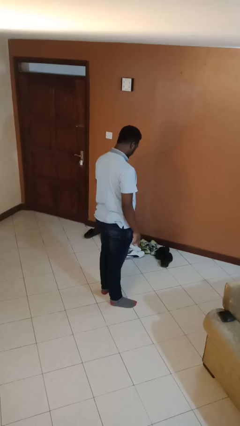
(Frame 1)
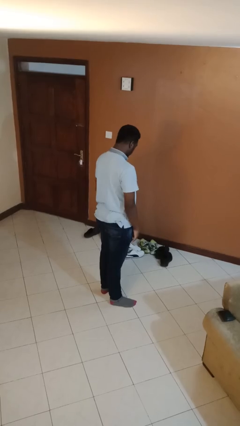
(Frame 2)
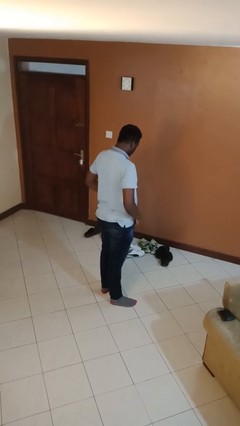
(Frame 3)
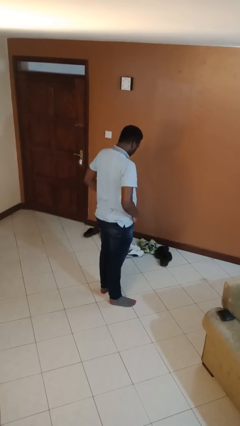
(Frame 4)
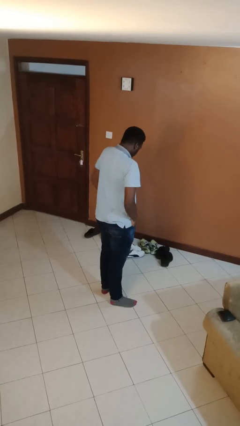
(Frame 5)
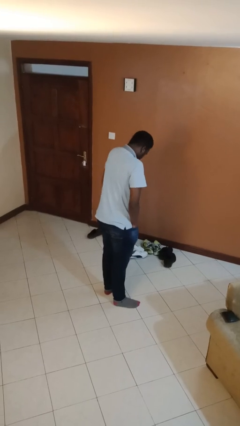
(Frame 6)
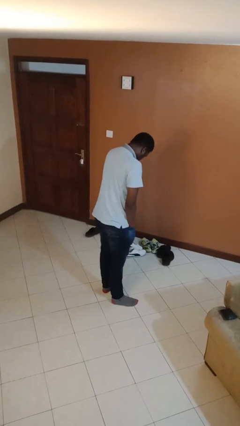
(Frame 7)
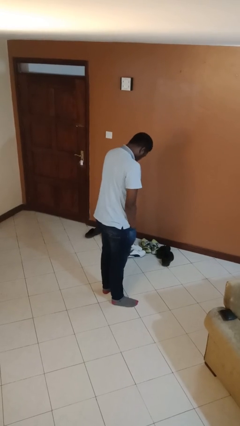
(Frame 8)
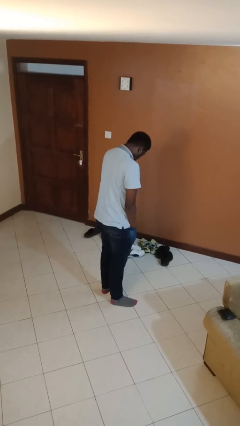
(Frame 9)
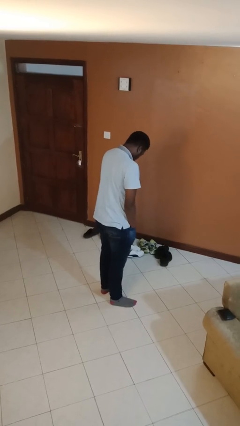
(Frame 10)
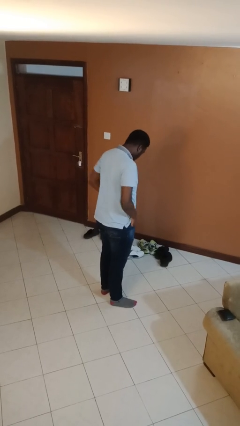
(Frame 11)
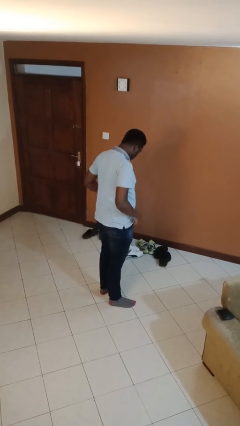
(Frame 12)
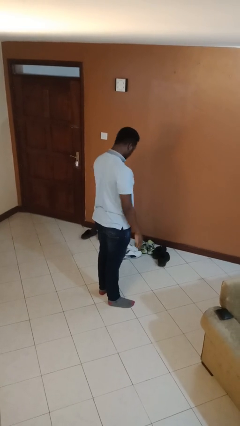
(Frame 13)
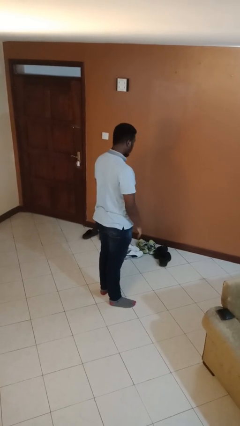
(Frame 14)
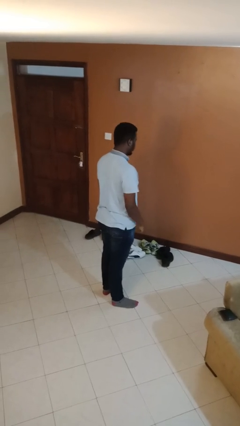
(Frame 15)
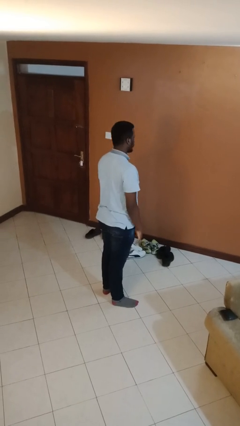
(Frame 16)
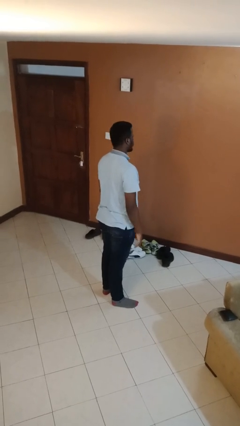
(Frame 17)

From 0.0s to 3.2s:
person puts hands in back pockets

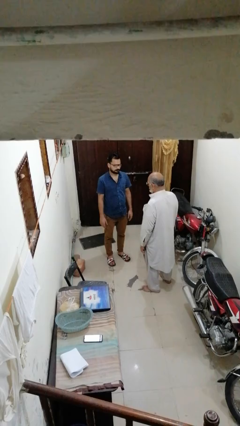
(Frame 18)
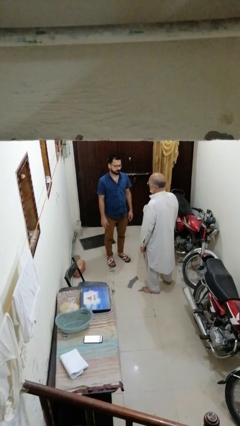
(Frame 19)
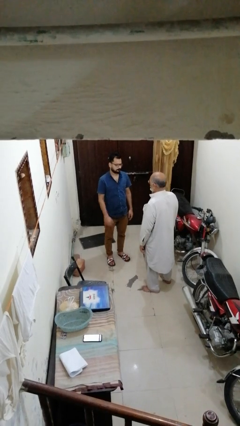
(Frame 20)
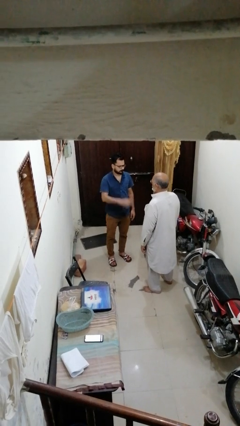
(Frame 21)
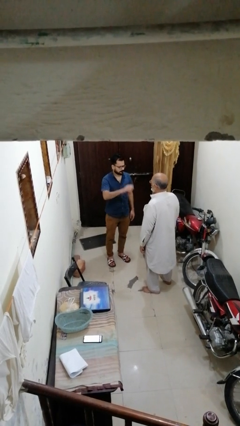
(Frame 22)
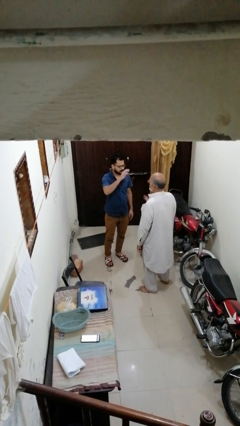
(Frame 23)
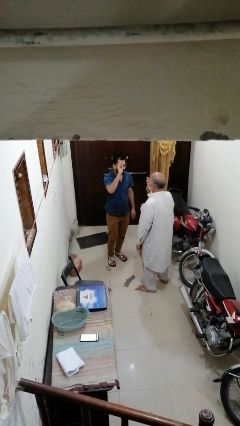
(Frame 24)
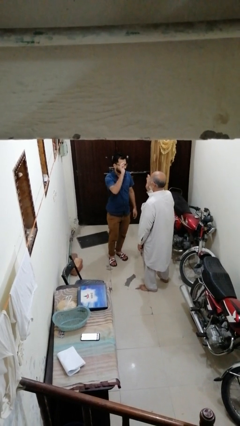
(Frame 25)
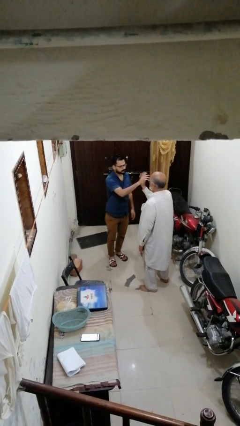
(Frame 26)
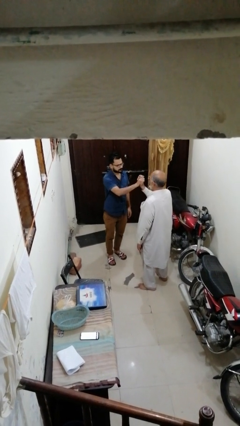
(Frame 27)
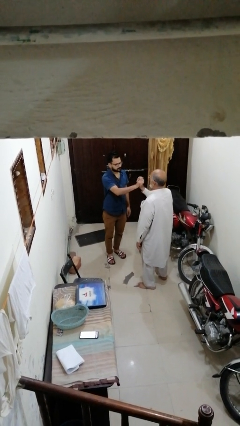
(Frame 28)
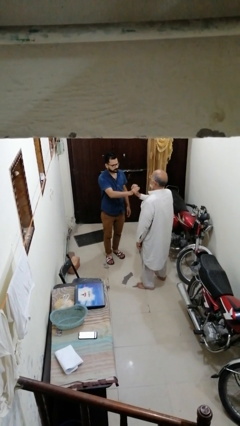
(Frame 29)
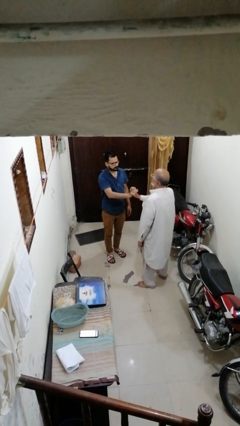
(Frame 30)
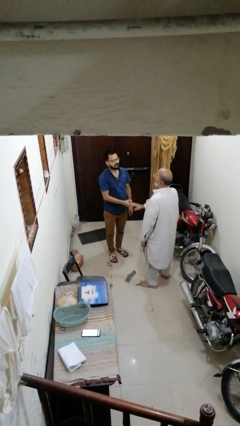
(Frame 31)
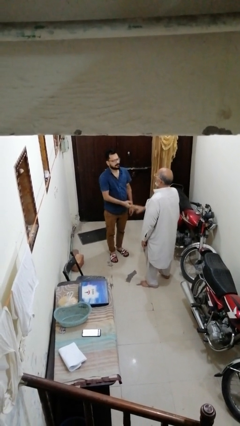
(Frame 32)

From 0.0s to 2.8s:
person highfives hand

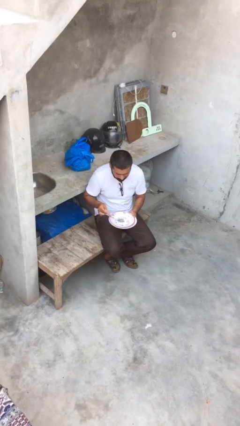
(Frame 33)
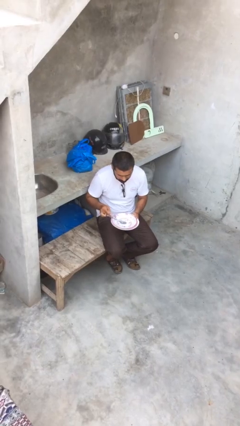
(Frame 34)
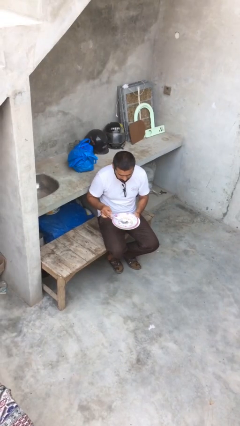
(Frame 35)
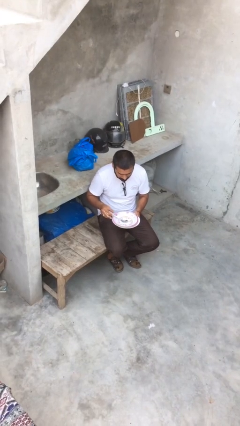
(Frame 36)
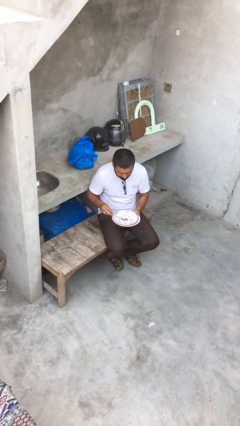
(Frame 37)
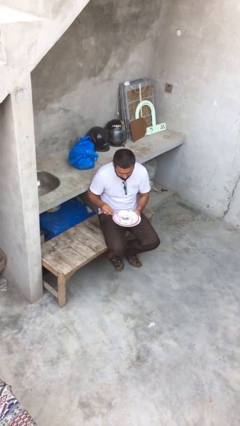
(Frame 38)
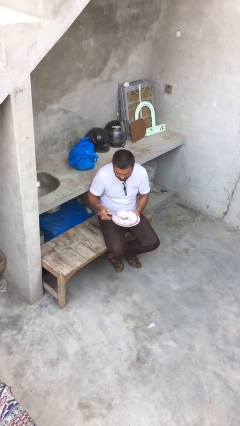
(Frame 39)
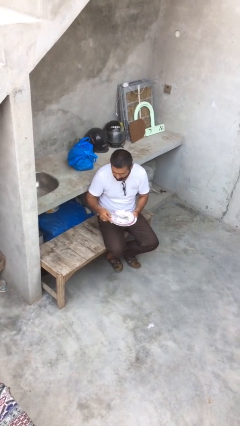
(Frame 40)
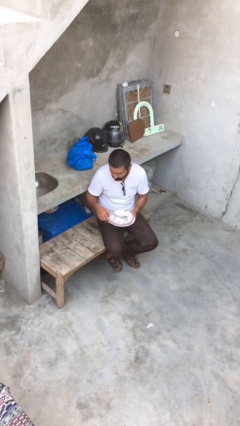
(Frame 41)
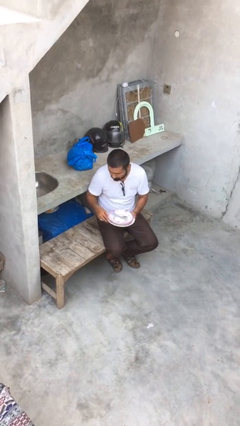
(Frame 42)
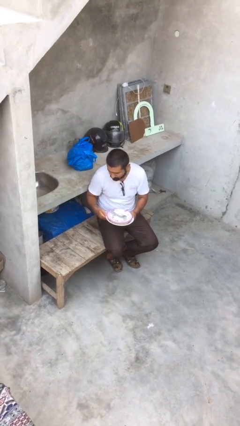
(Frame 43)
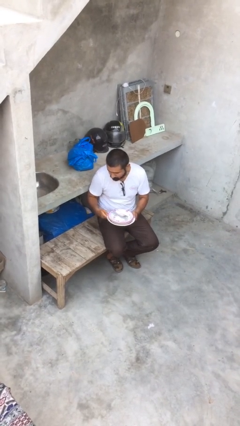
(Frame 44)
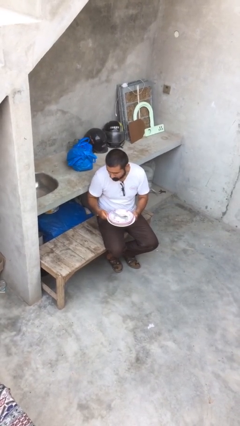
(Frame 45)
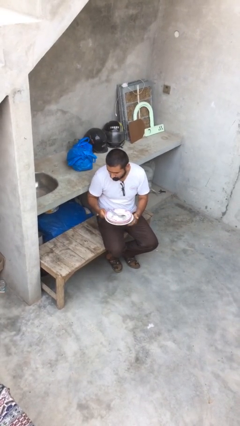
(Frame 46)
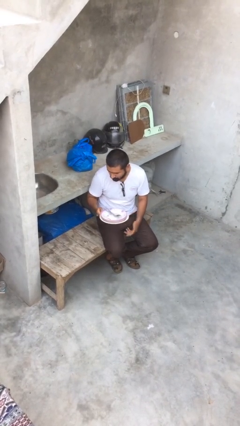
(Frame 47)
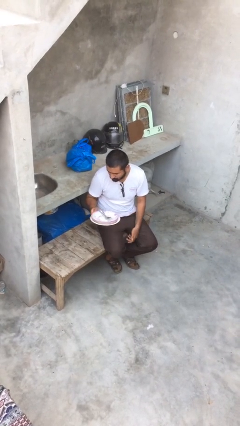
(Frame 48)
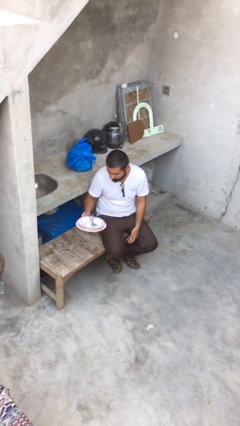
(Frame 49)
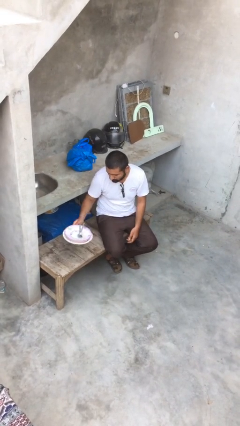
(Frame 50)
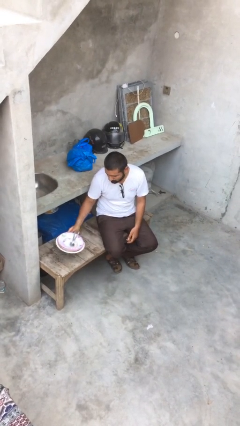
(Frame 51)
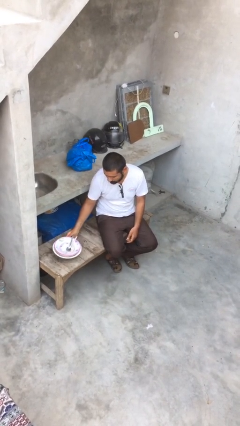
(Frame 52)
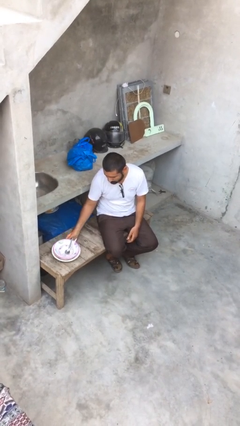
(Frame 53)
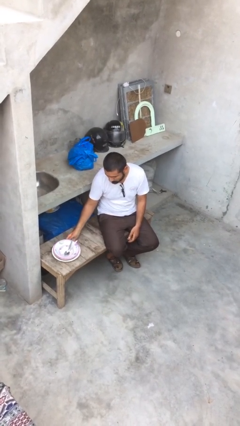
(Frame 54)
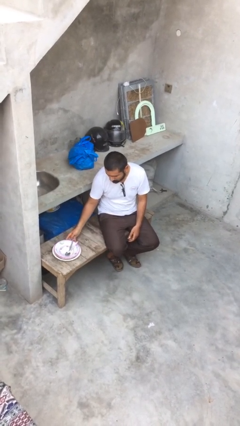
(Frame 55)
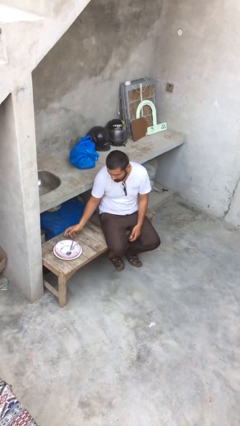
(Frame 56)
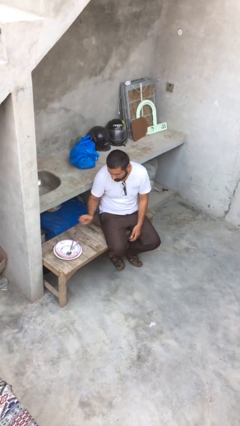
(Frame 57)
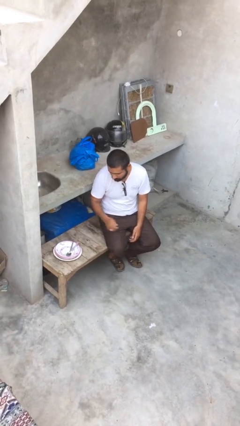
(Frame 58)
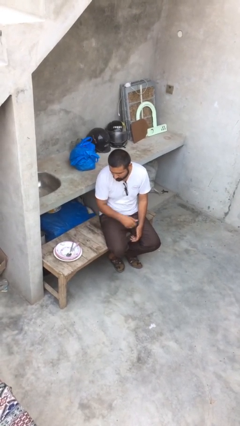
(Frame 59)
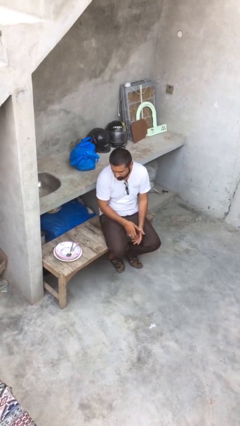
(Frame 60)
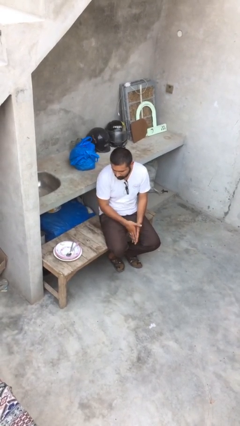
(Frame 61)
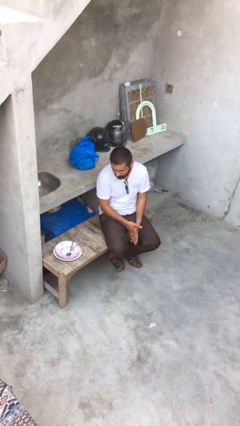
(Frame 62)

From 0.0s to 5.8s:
person puts down object on table

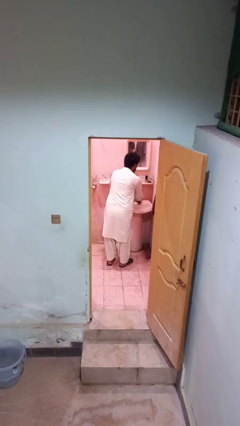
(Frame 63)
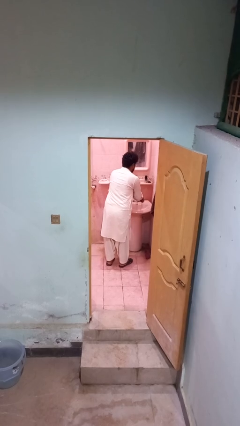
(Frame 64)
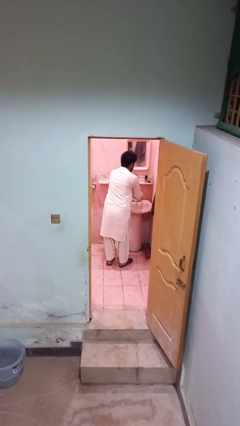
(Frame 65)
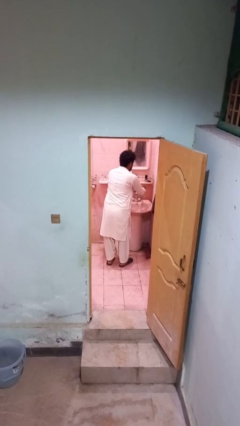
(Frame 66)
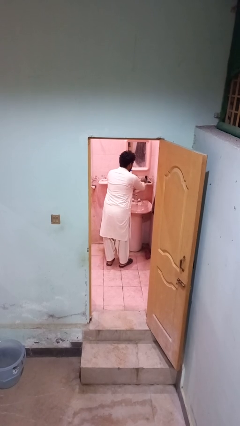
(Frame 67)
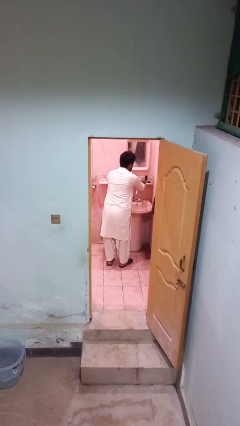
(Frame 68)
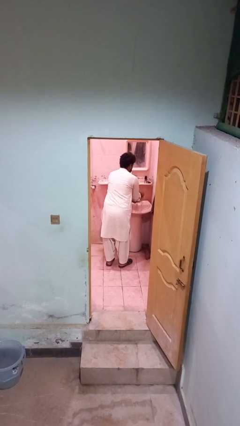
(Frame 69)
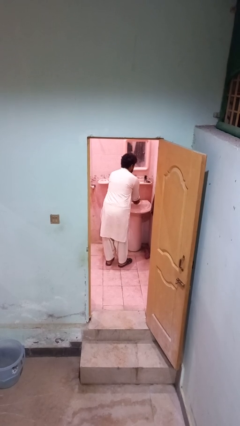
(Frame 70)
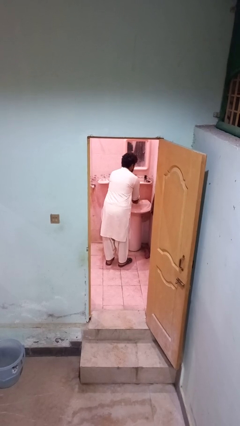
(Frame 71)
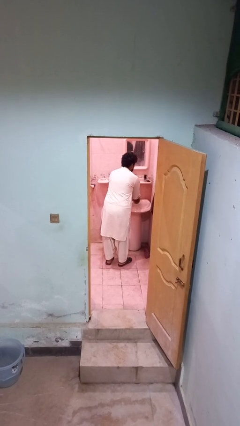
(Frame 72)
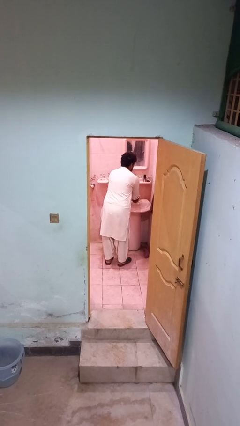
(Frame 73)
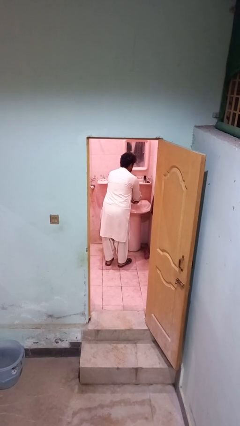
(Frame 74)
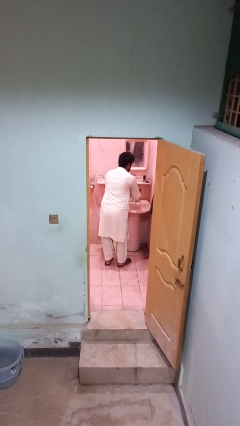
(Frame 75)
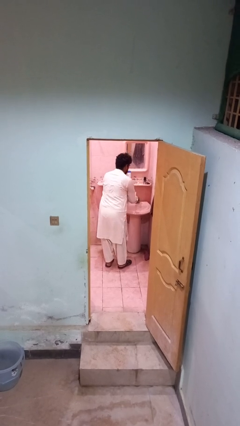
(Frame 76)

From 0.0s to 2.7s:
person washes hands

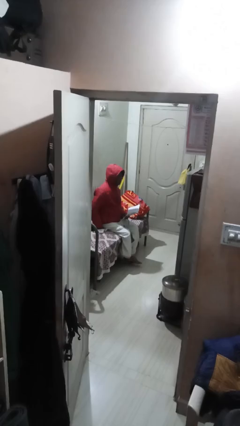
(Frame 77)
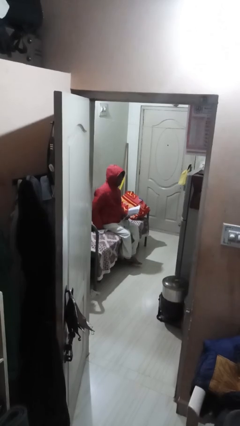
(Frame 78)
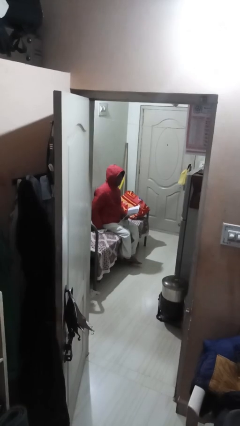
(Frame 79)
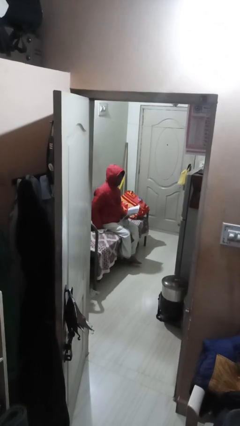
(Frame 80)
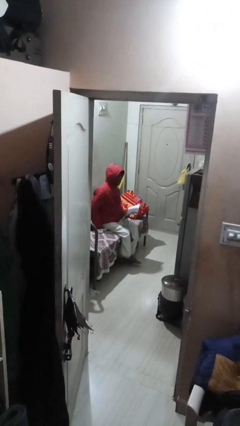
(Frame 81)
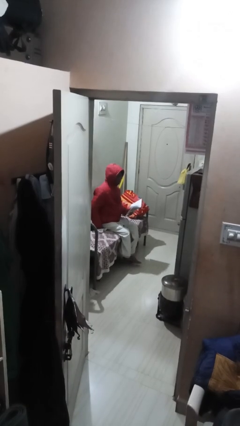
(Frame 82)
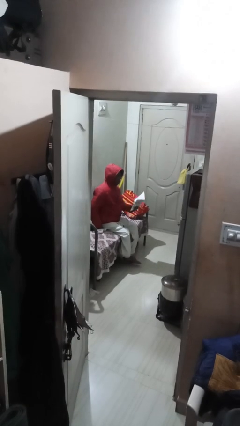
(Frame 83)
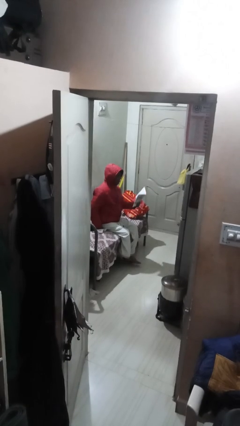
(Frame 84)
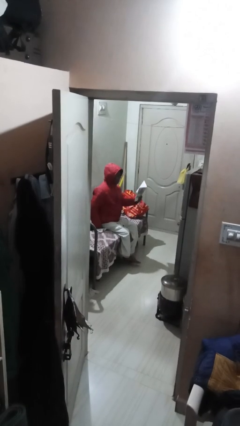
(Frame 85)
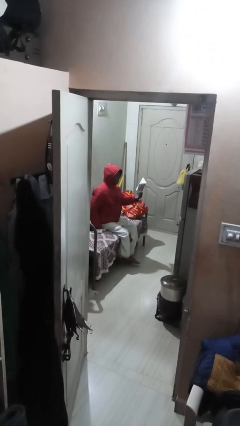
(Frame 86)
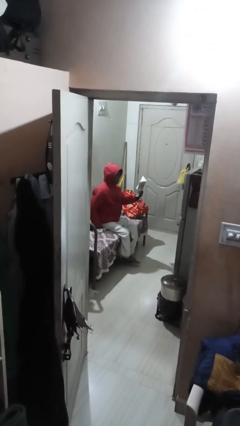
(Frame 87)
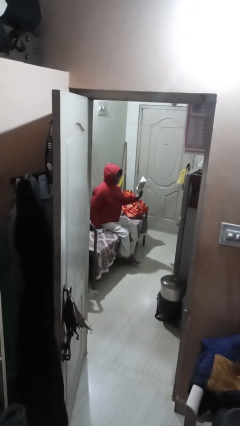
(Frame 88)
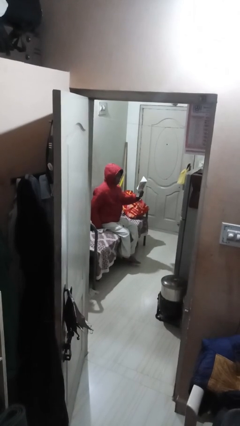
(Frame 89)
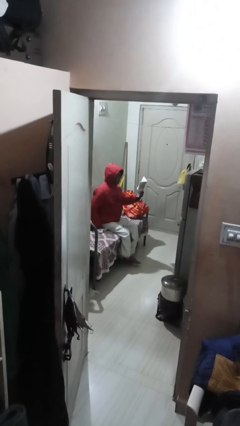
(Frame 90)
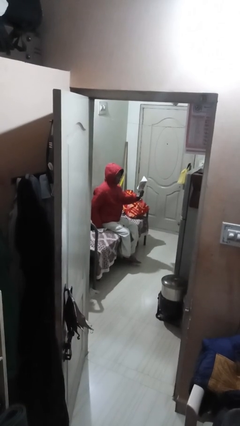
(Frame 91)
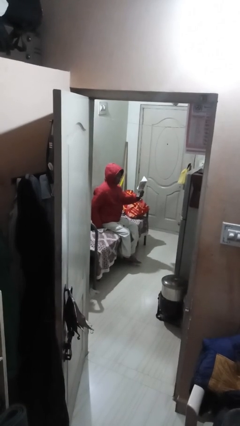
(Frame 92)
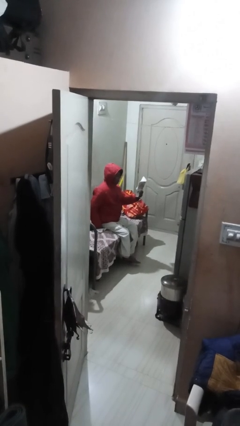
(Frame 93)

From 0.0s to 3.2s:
person reads document
